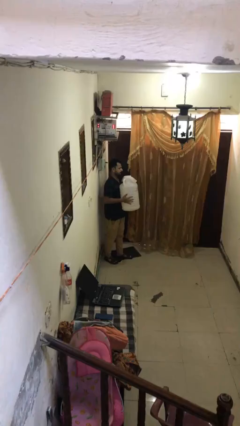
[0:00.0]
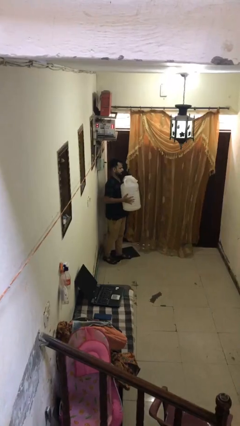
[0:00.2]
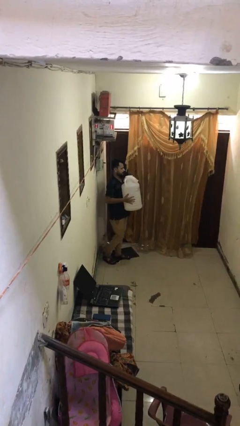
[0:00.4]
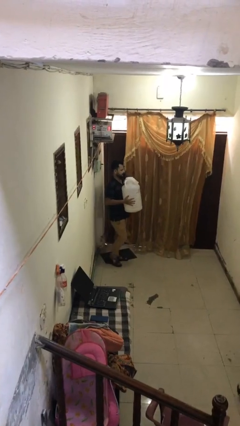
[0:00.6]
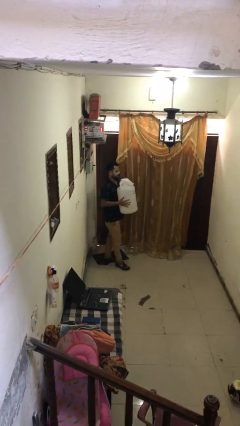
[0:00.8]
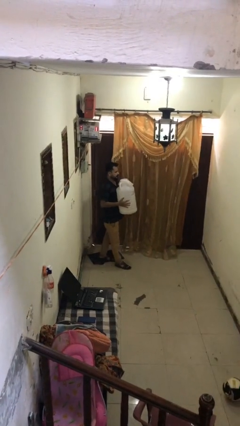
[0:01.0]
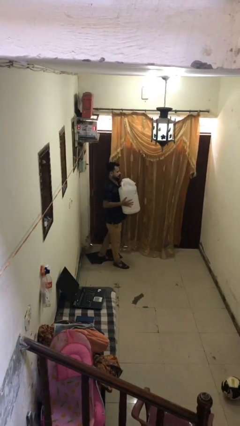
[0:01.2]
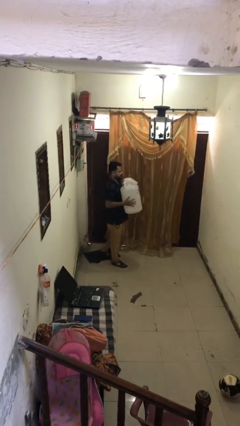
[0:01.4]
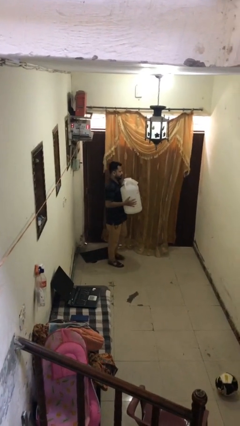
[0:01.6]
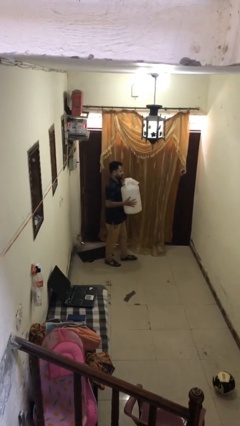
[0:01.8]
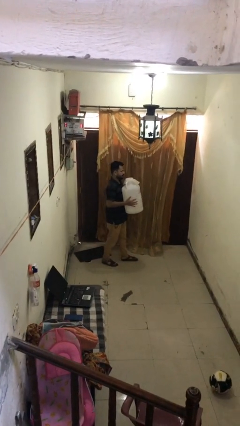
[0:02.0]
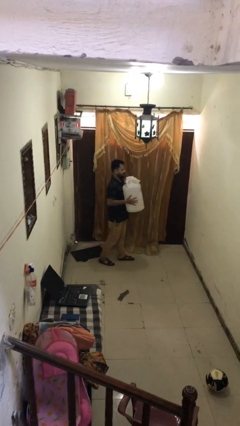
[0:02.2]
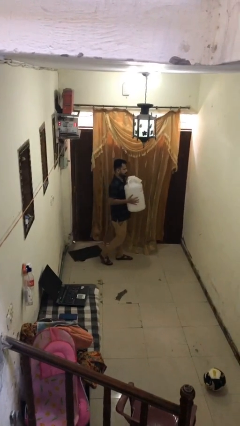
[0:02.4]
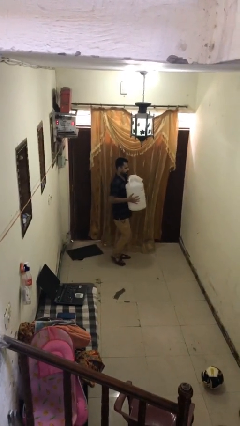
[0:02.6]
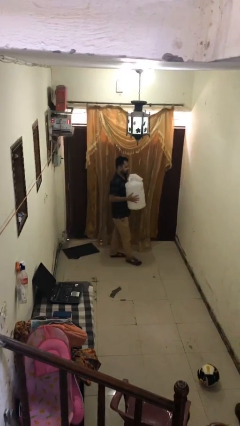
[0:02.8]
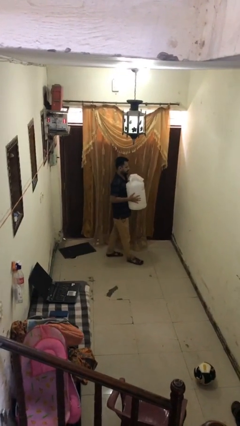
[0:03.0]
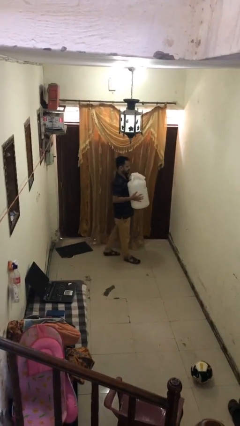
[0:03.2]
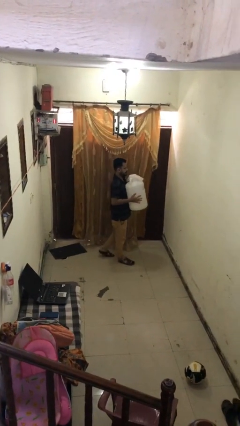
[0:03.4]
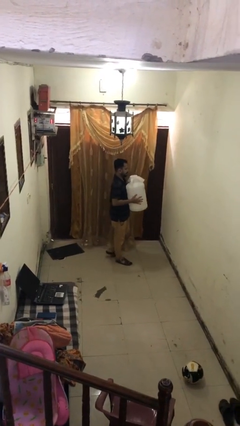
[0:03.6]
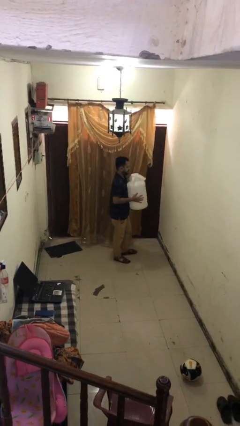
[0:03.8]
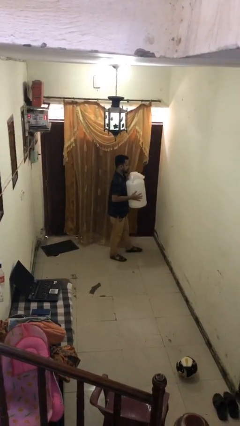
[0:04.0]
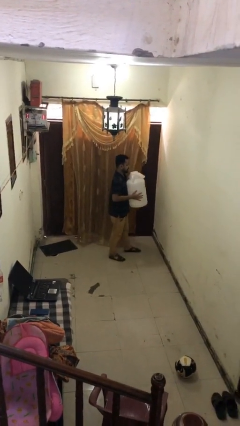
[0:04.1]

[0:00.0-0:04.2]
person carries heavy object

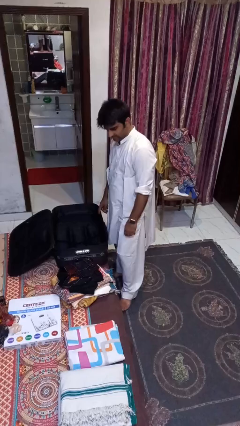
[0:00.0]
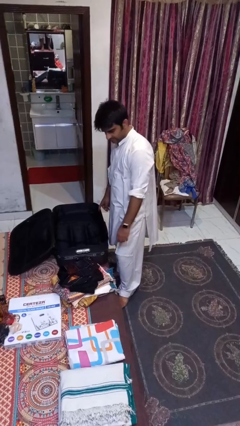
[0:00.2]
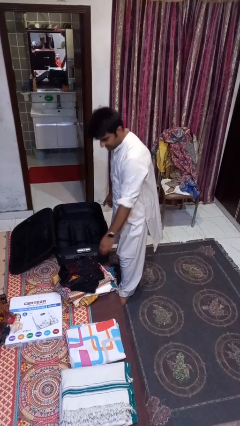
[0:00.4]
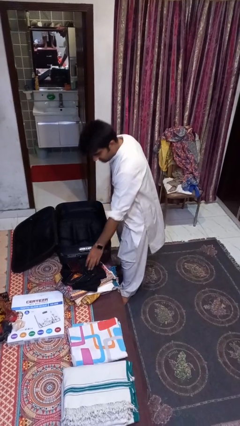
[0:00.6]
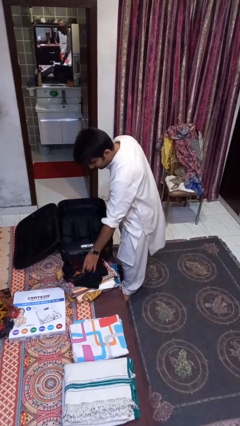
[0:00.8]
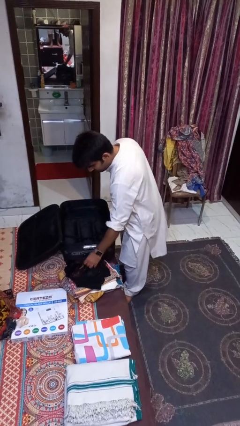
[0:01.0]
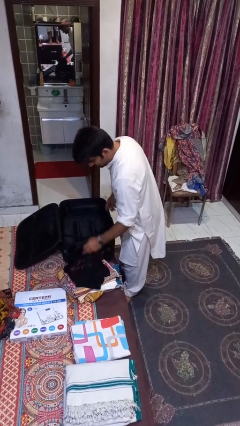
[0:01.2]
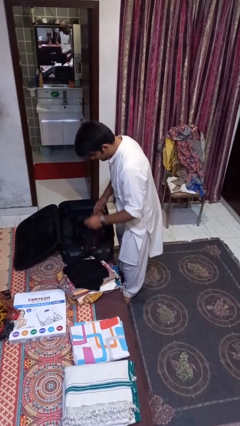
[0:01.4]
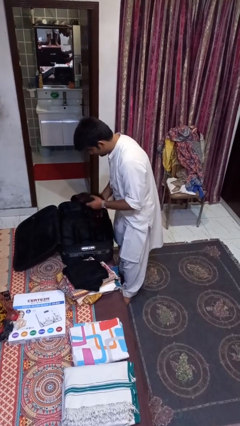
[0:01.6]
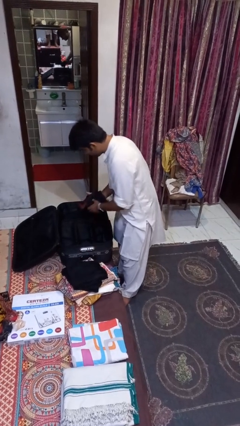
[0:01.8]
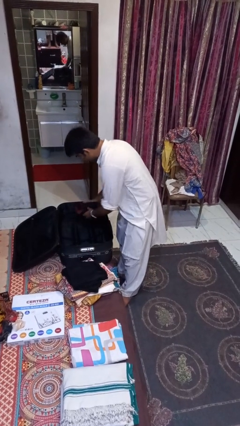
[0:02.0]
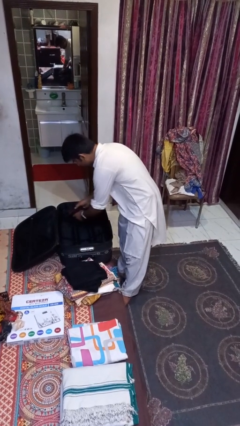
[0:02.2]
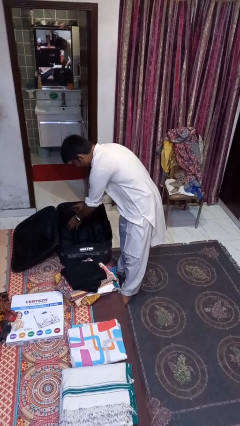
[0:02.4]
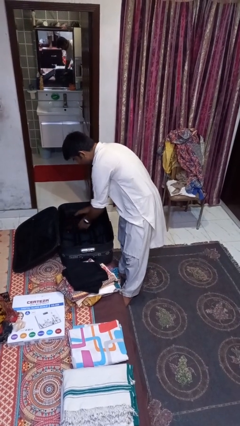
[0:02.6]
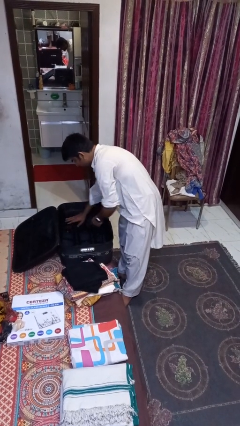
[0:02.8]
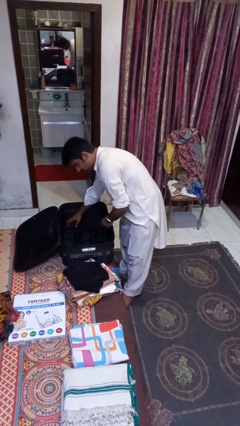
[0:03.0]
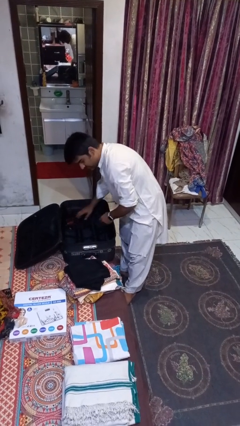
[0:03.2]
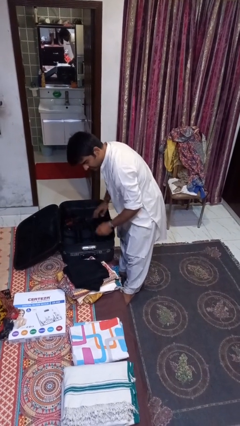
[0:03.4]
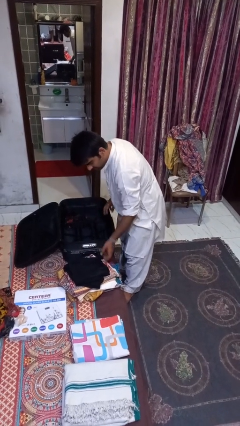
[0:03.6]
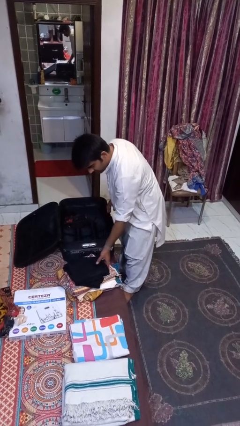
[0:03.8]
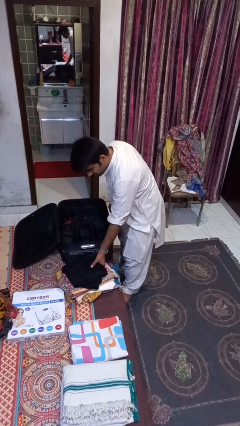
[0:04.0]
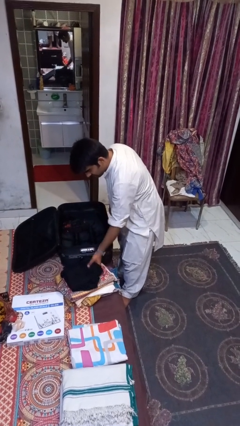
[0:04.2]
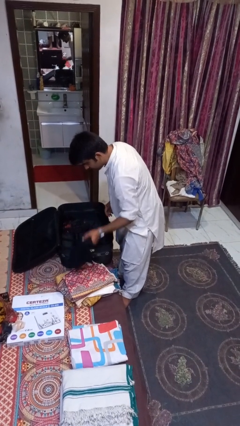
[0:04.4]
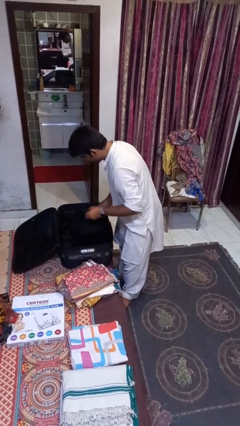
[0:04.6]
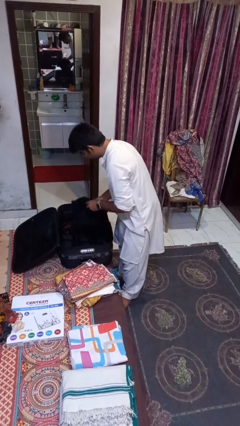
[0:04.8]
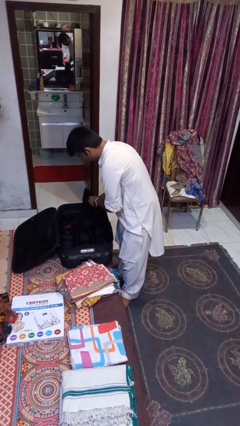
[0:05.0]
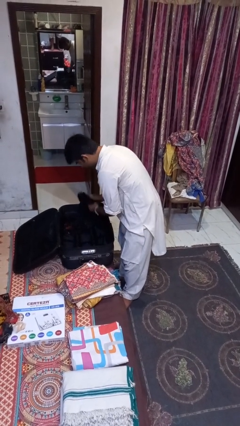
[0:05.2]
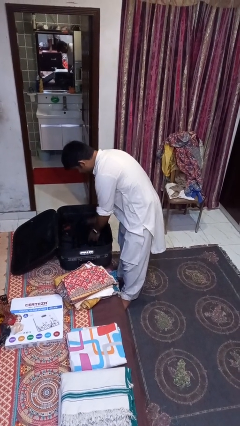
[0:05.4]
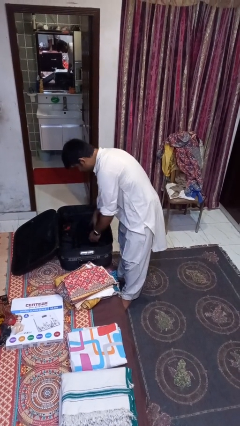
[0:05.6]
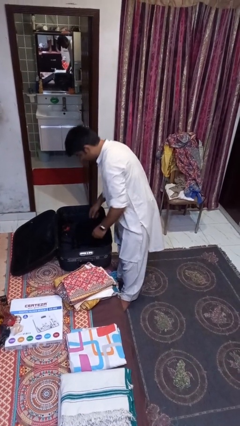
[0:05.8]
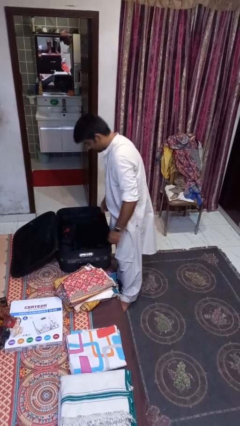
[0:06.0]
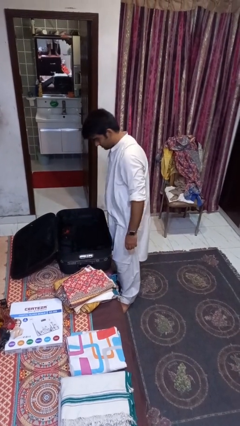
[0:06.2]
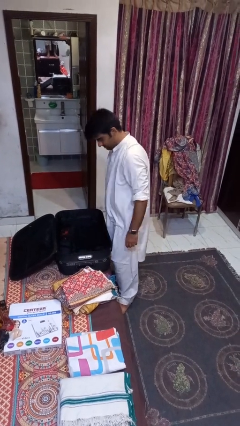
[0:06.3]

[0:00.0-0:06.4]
person loads clothes into suitcase

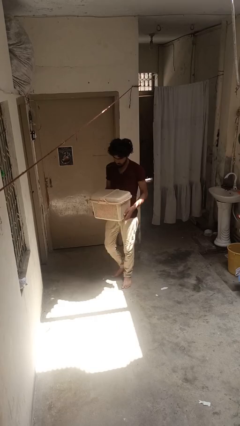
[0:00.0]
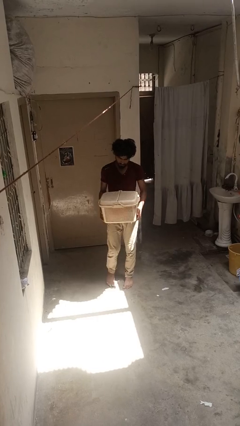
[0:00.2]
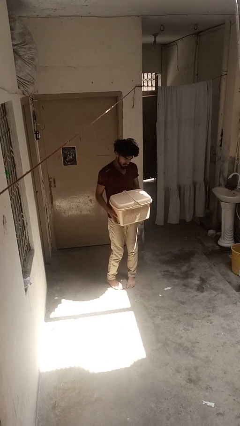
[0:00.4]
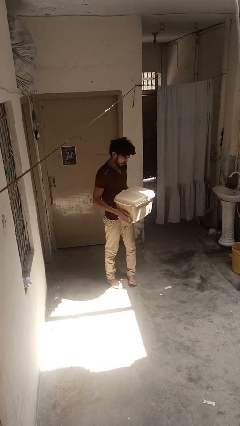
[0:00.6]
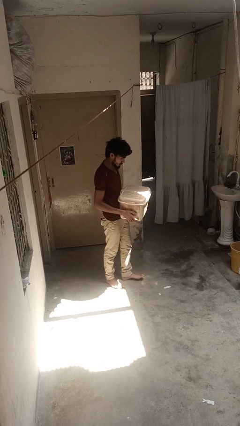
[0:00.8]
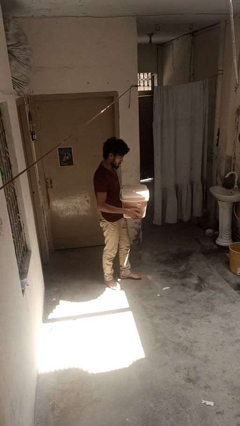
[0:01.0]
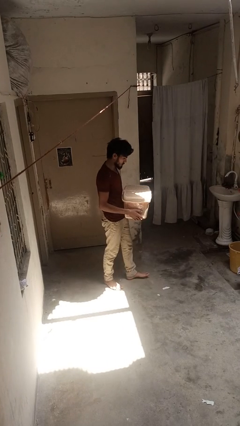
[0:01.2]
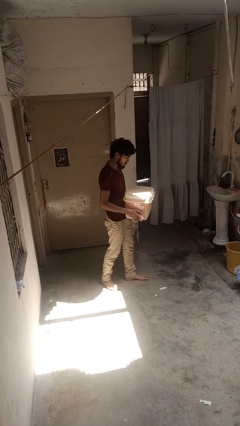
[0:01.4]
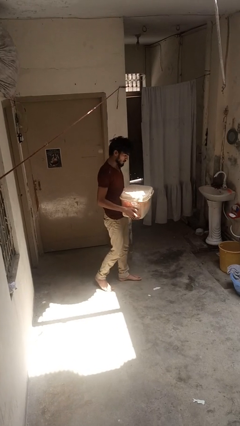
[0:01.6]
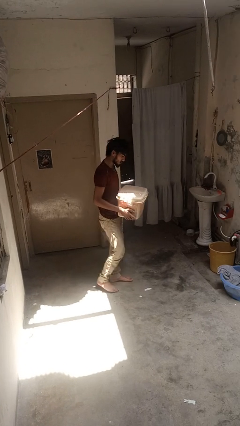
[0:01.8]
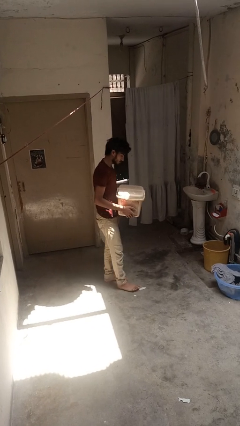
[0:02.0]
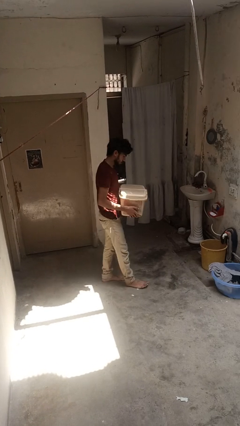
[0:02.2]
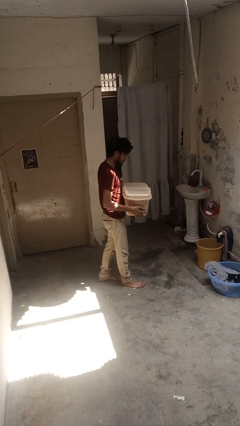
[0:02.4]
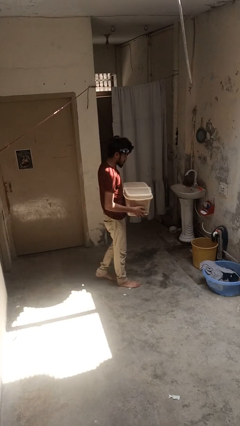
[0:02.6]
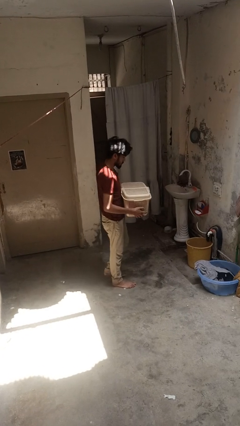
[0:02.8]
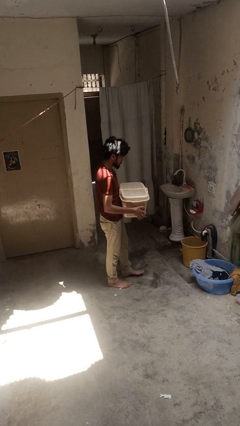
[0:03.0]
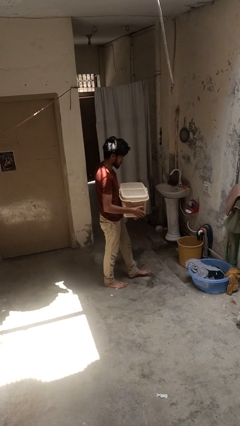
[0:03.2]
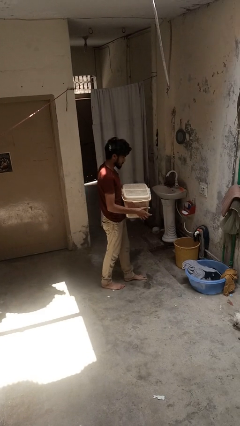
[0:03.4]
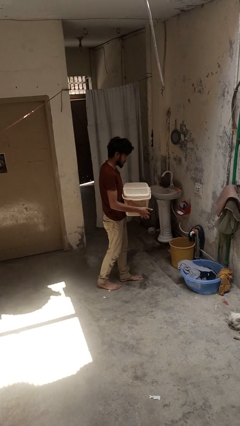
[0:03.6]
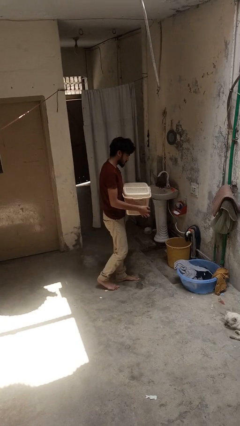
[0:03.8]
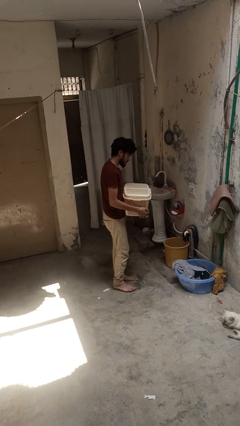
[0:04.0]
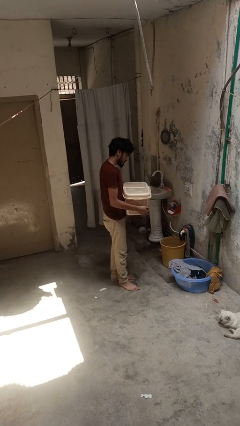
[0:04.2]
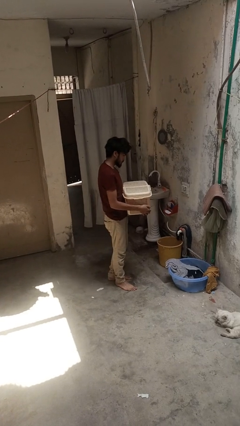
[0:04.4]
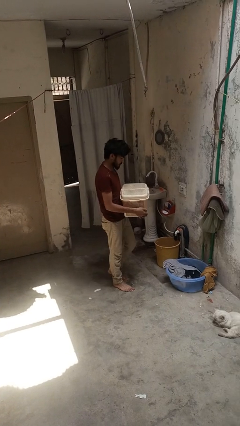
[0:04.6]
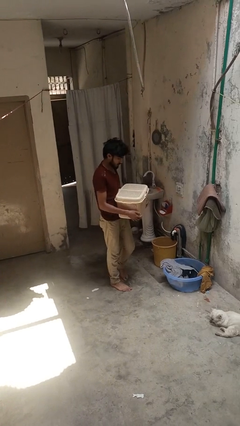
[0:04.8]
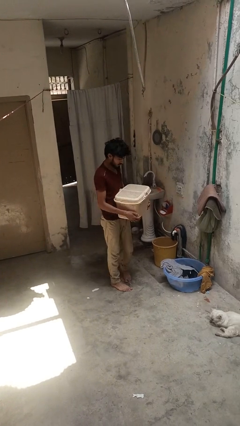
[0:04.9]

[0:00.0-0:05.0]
person carries laundry basket

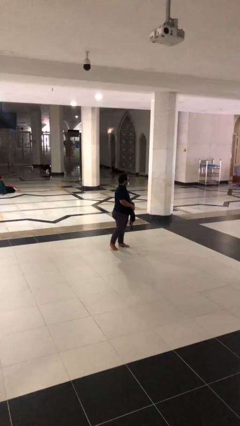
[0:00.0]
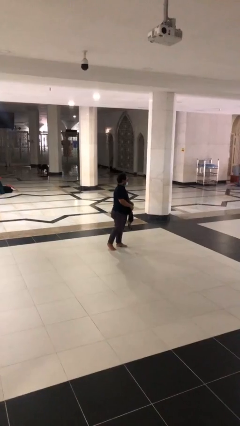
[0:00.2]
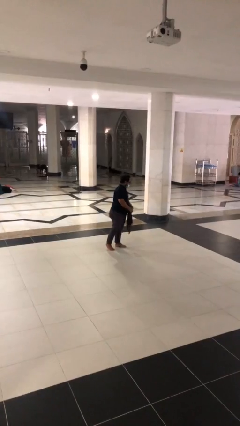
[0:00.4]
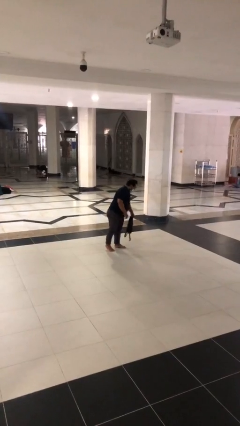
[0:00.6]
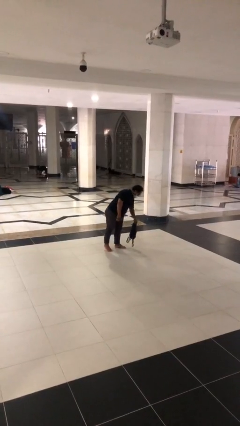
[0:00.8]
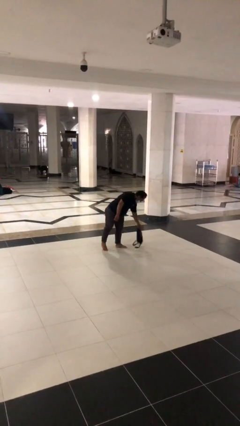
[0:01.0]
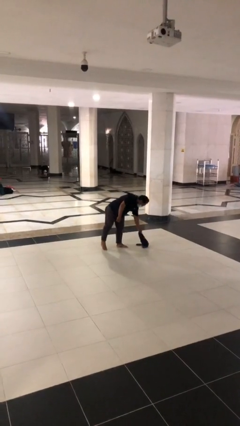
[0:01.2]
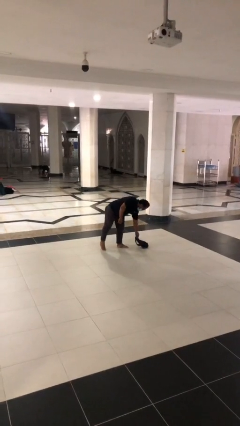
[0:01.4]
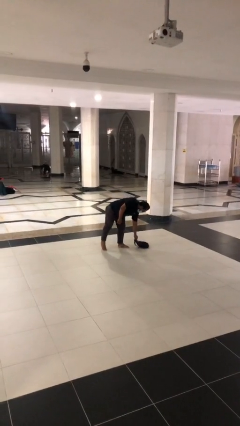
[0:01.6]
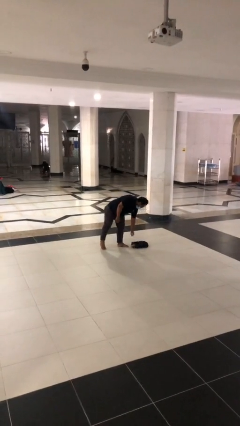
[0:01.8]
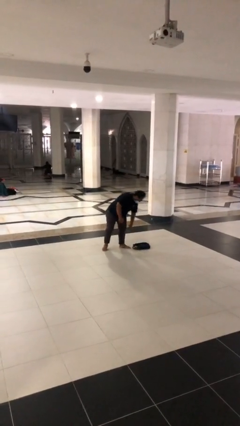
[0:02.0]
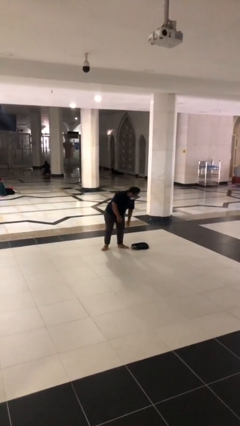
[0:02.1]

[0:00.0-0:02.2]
person puts down object on floor
